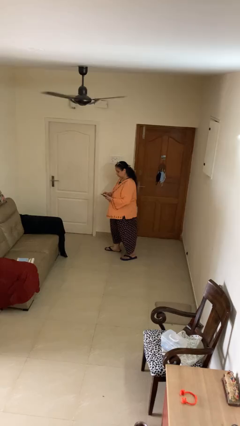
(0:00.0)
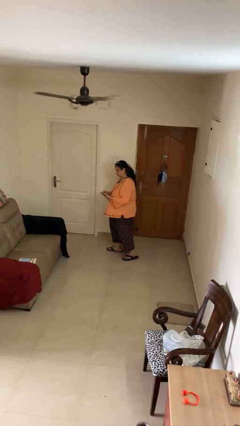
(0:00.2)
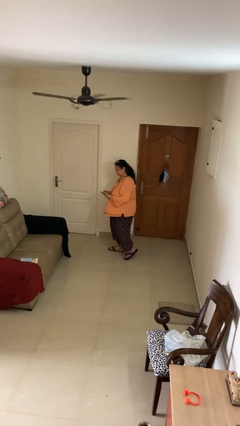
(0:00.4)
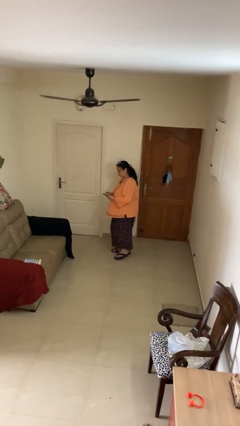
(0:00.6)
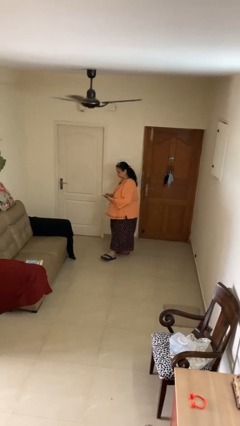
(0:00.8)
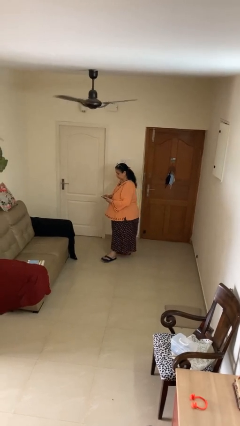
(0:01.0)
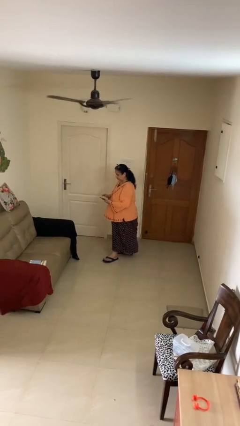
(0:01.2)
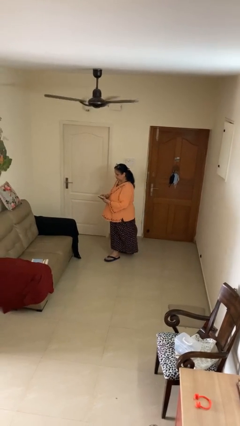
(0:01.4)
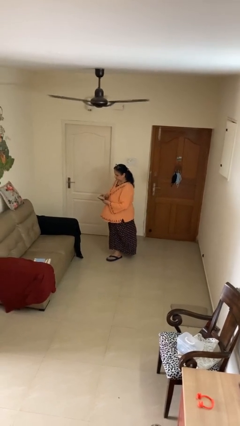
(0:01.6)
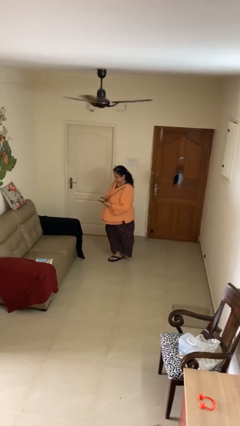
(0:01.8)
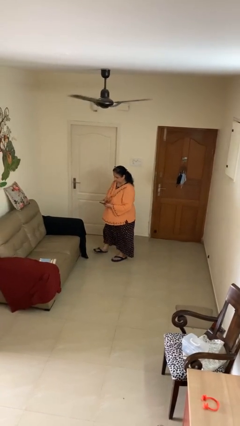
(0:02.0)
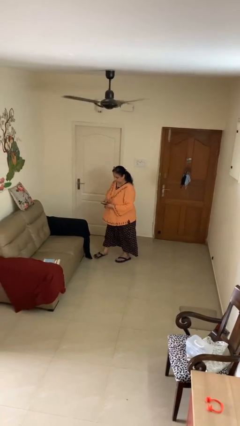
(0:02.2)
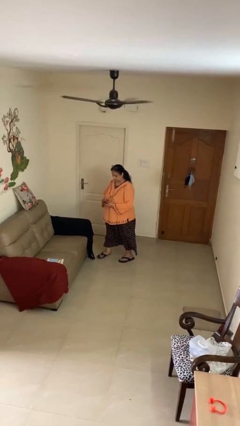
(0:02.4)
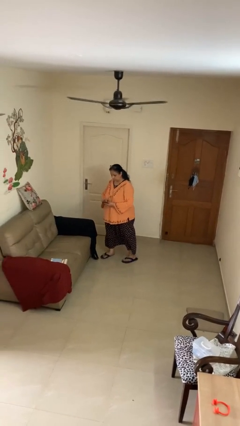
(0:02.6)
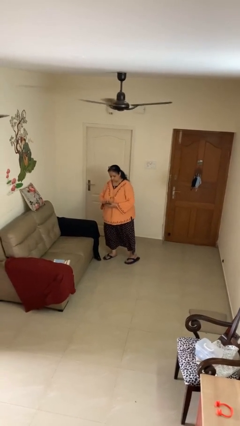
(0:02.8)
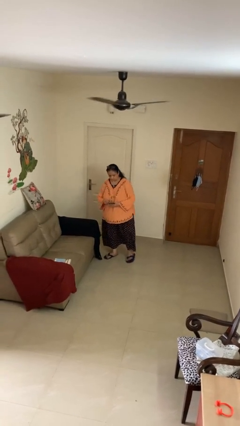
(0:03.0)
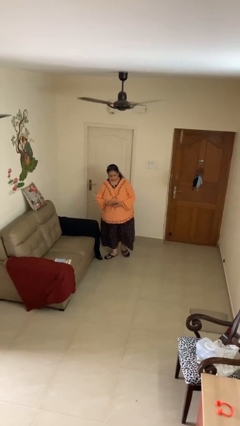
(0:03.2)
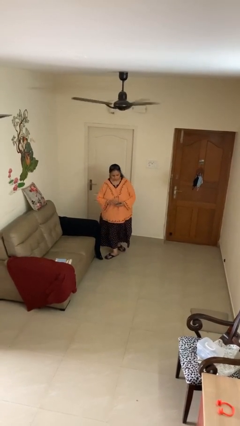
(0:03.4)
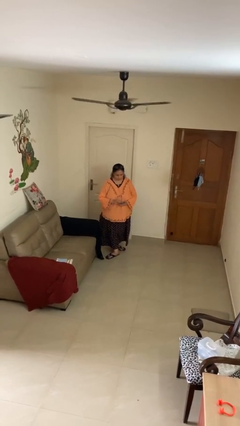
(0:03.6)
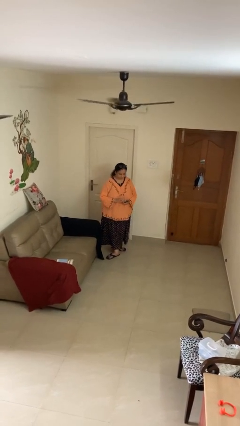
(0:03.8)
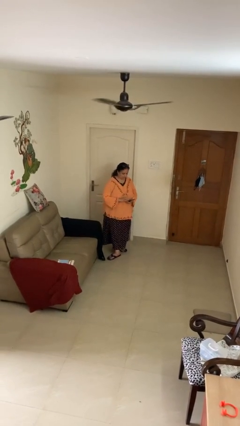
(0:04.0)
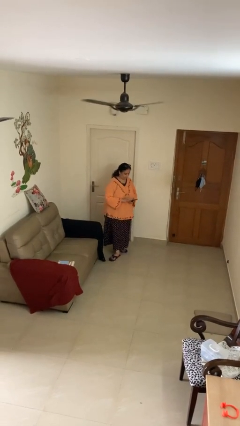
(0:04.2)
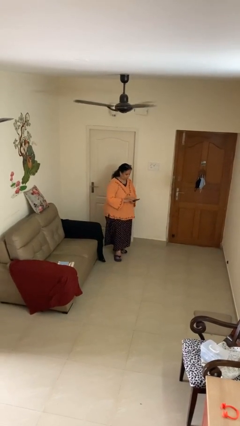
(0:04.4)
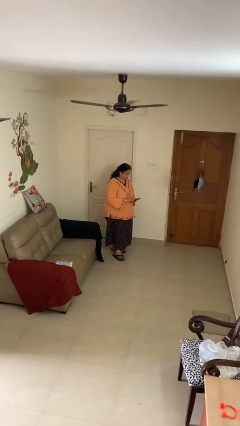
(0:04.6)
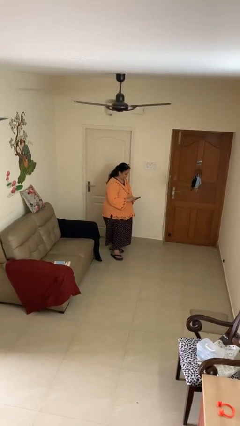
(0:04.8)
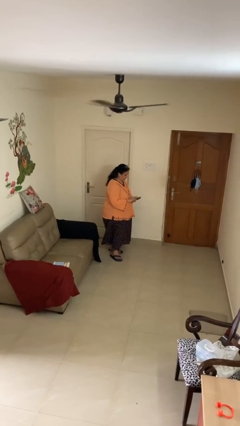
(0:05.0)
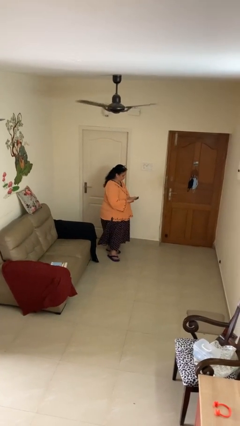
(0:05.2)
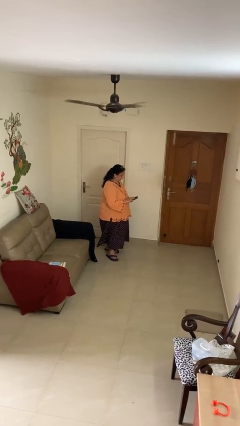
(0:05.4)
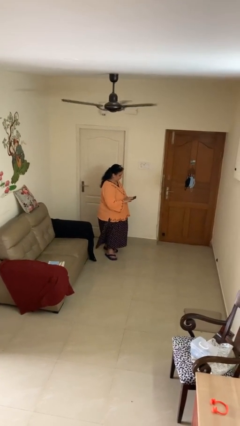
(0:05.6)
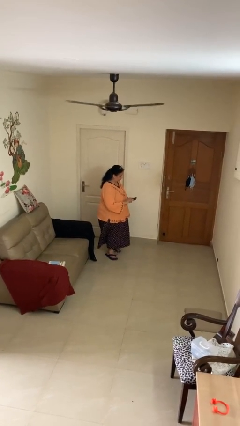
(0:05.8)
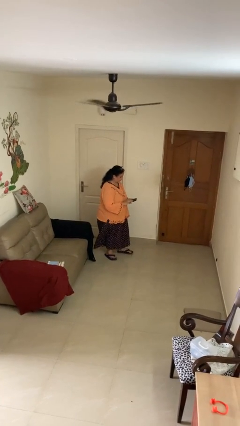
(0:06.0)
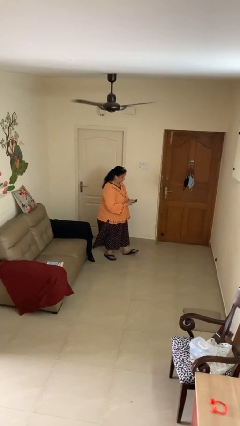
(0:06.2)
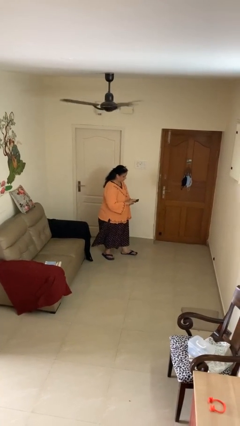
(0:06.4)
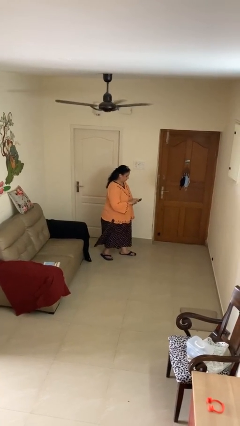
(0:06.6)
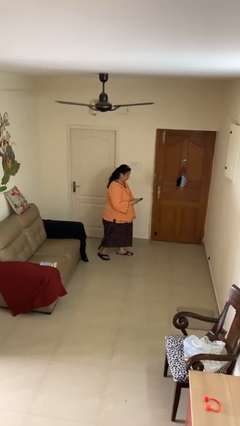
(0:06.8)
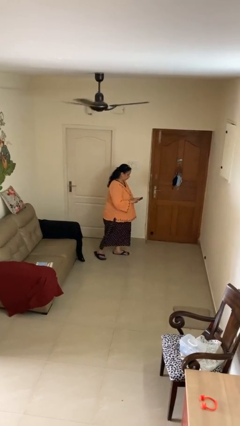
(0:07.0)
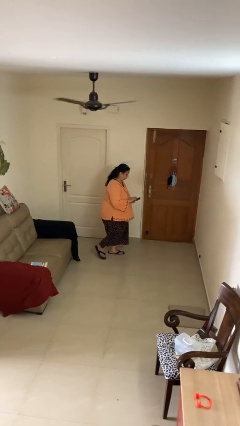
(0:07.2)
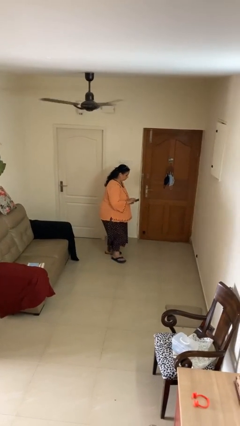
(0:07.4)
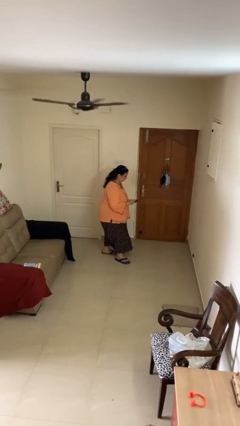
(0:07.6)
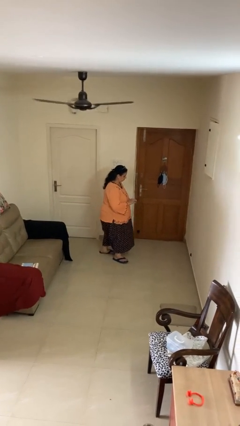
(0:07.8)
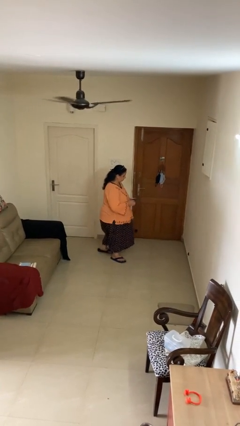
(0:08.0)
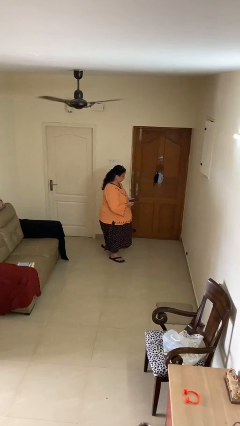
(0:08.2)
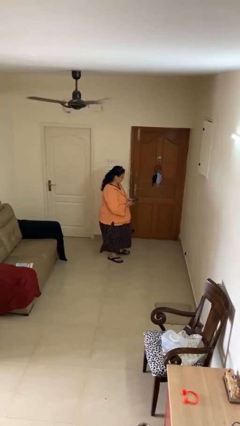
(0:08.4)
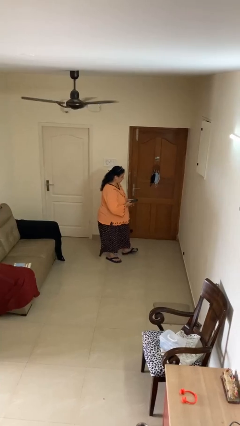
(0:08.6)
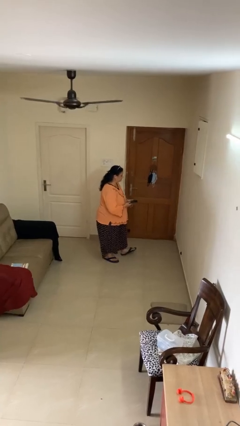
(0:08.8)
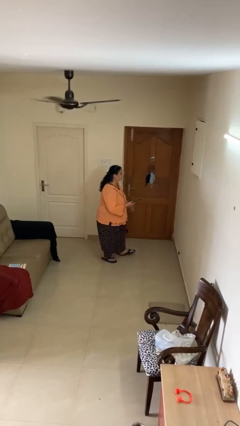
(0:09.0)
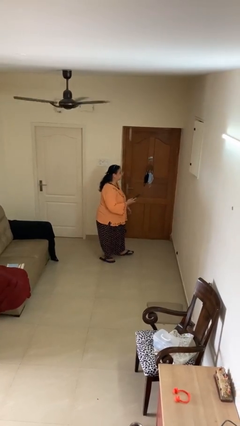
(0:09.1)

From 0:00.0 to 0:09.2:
person texts on phone

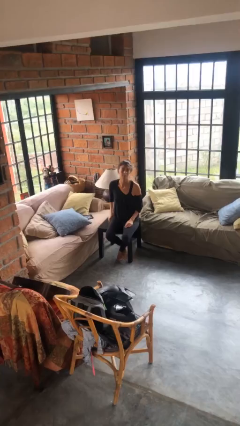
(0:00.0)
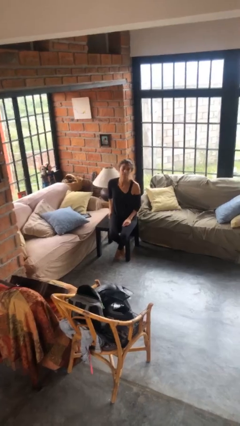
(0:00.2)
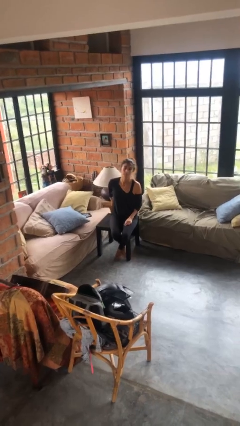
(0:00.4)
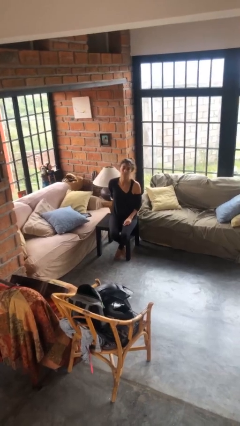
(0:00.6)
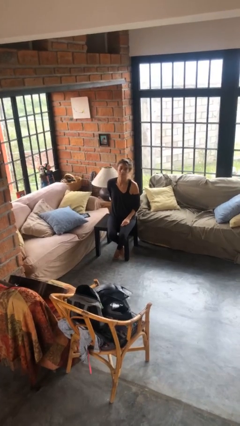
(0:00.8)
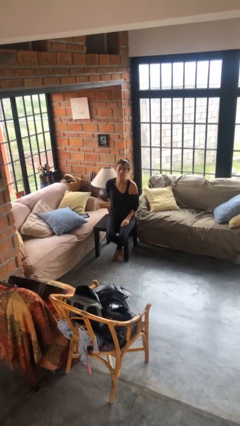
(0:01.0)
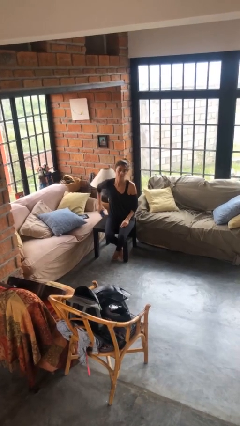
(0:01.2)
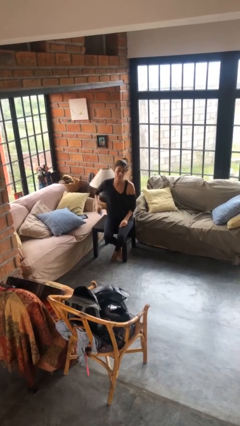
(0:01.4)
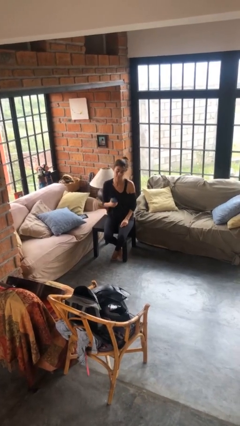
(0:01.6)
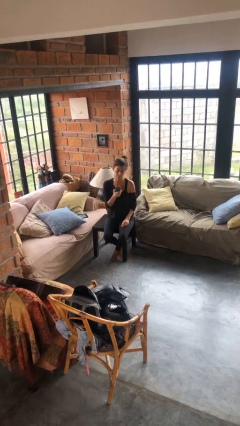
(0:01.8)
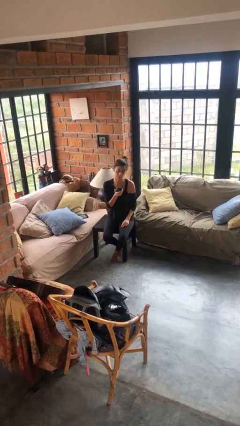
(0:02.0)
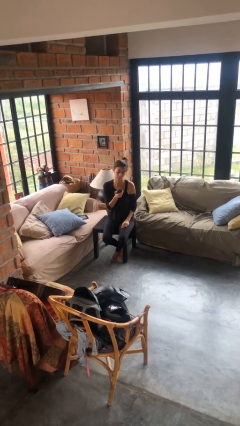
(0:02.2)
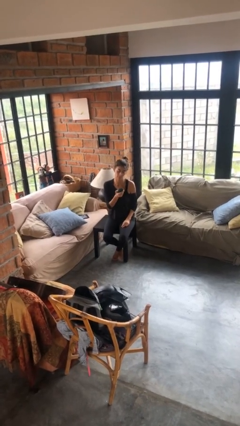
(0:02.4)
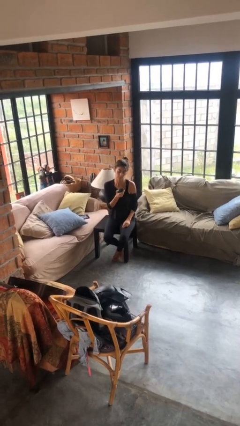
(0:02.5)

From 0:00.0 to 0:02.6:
person takes phone from pocket

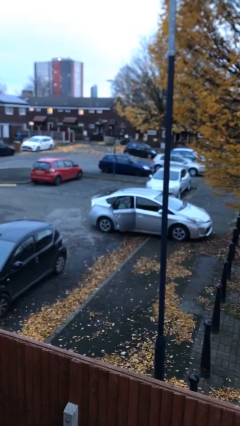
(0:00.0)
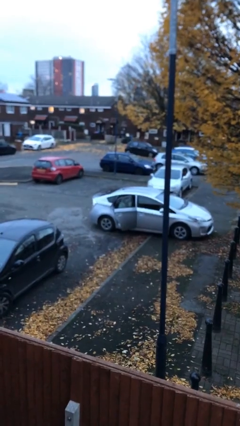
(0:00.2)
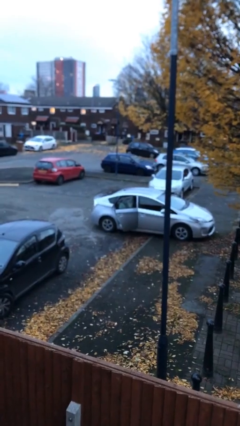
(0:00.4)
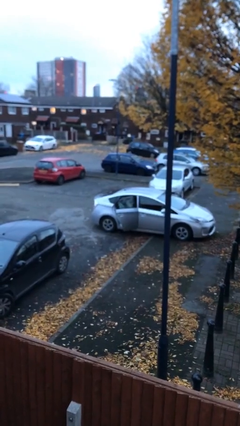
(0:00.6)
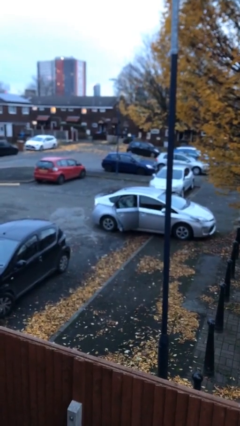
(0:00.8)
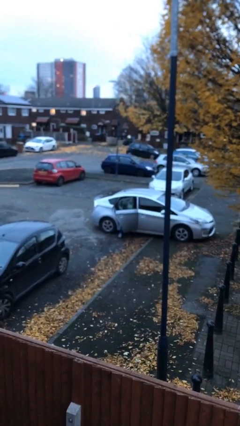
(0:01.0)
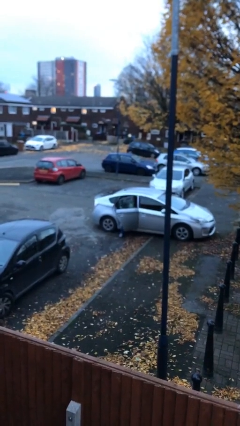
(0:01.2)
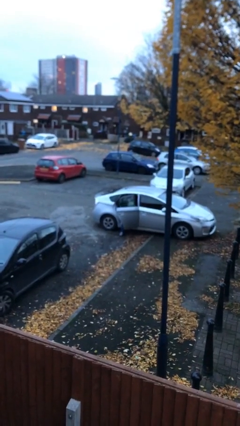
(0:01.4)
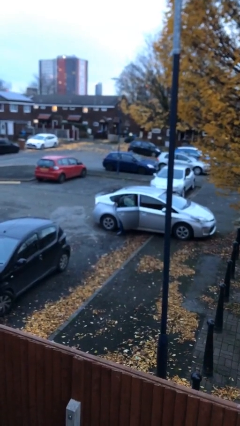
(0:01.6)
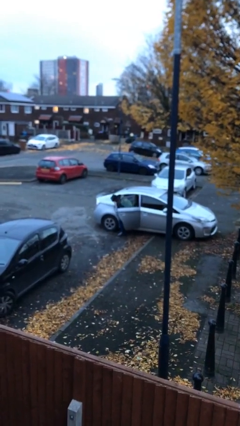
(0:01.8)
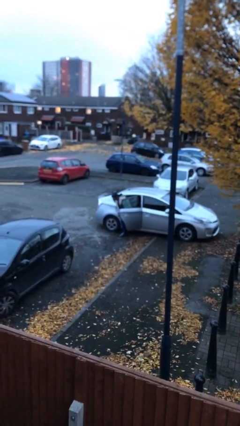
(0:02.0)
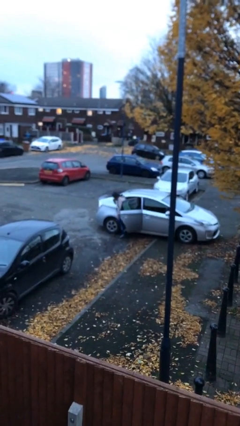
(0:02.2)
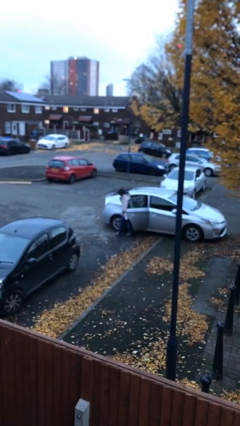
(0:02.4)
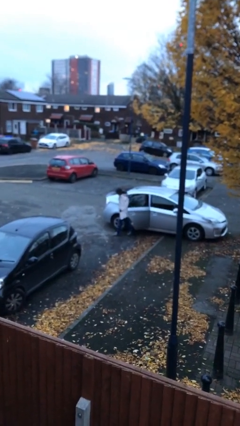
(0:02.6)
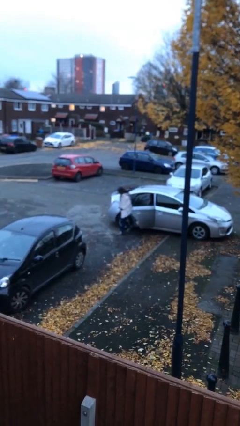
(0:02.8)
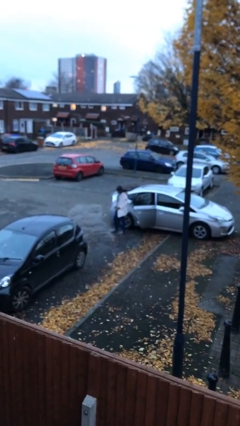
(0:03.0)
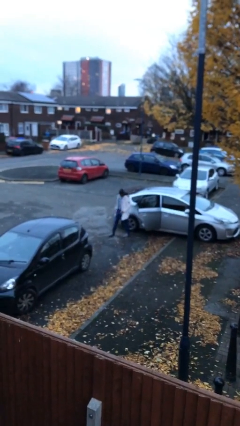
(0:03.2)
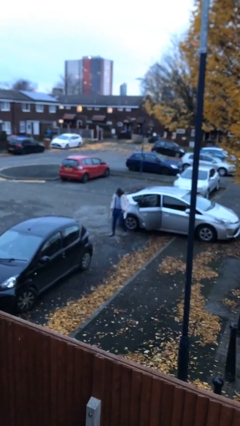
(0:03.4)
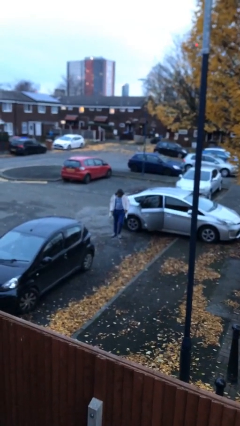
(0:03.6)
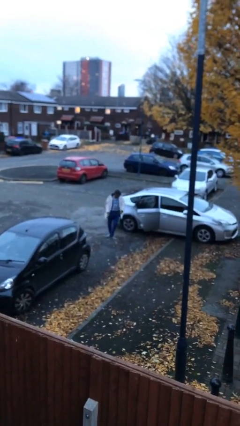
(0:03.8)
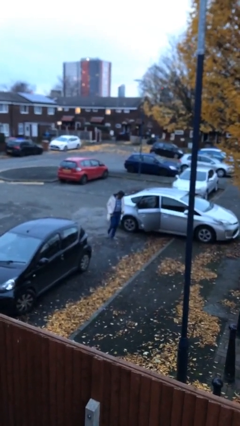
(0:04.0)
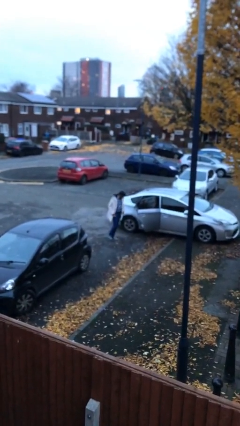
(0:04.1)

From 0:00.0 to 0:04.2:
person exits car

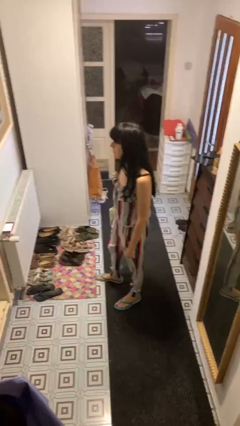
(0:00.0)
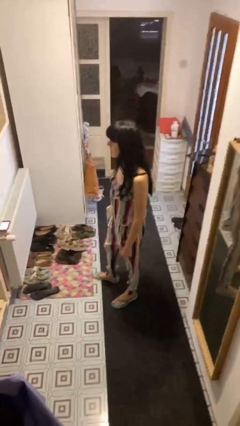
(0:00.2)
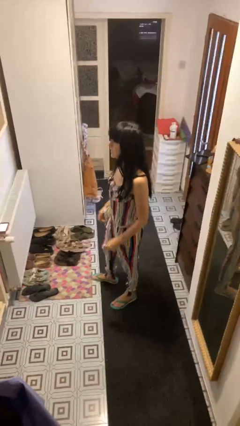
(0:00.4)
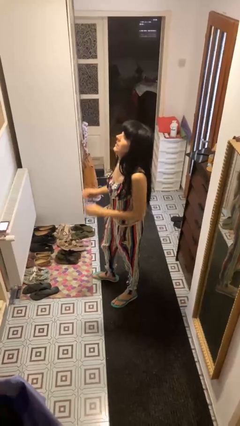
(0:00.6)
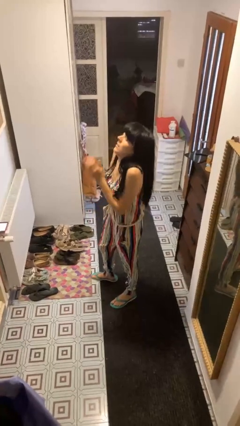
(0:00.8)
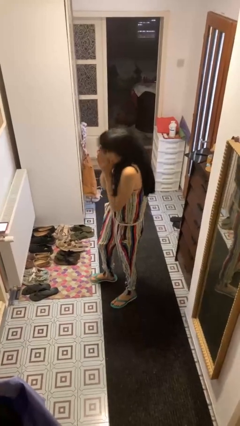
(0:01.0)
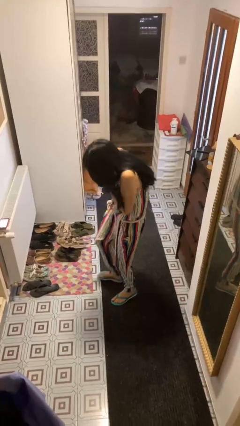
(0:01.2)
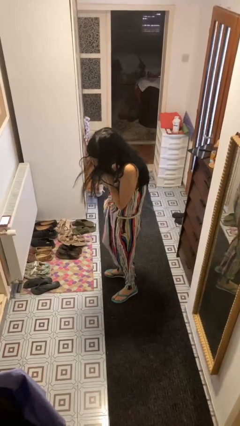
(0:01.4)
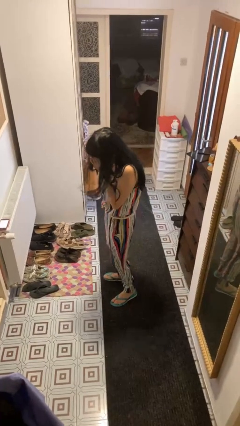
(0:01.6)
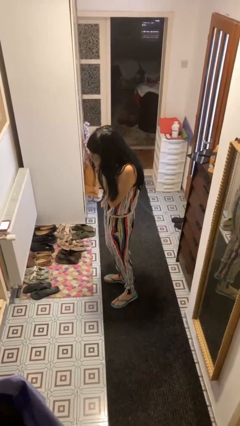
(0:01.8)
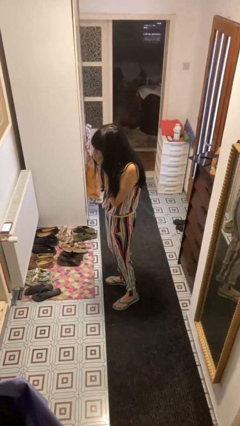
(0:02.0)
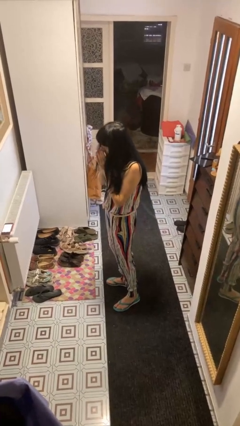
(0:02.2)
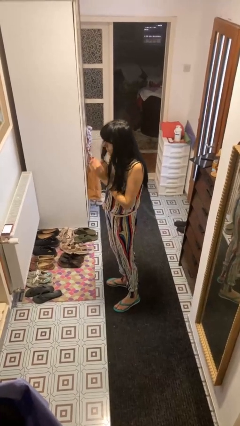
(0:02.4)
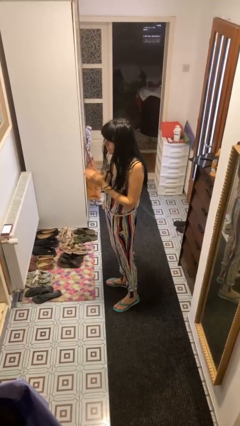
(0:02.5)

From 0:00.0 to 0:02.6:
person sneezes into hand
